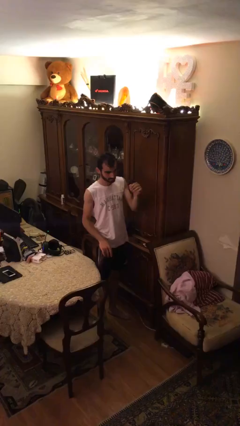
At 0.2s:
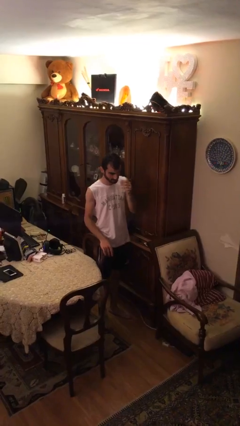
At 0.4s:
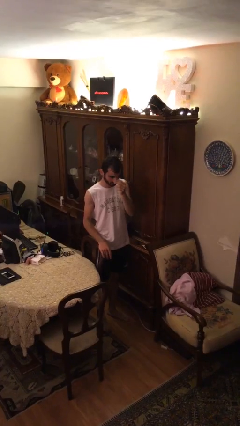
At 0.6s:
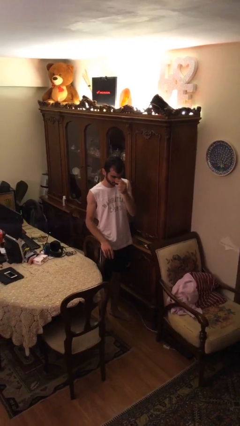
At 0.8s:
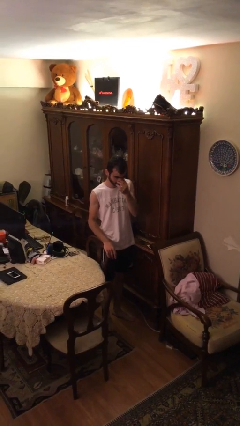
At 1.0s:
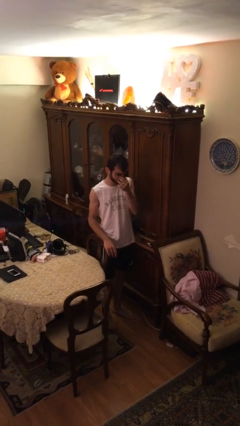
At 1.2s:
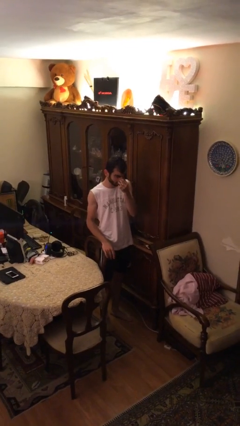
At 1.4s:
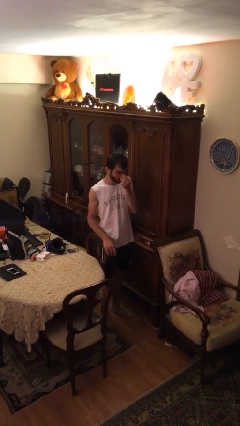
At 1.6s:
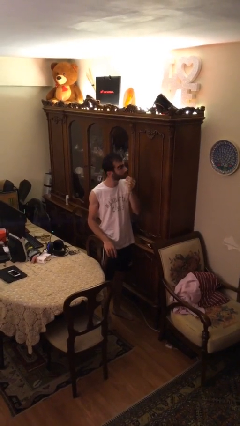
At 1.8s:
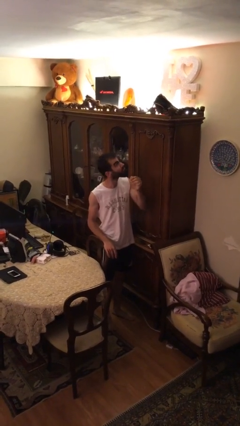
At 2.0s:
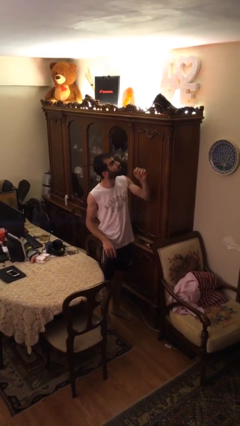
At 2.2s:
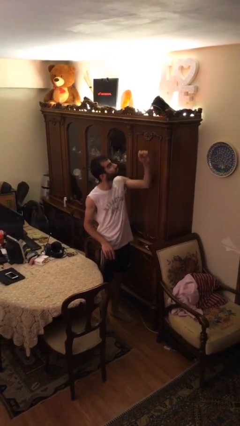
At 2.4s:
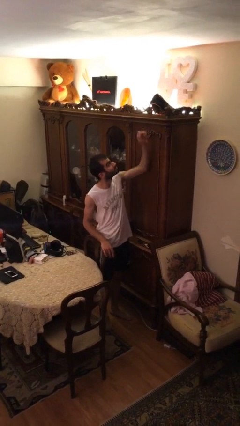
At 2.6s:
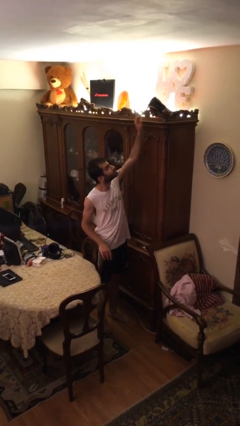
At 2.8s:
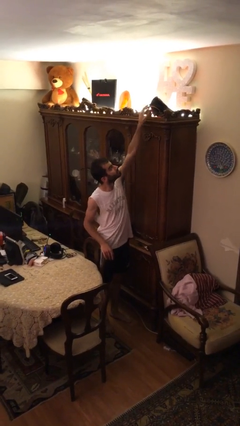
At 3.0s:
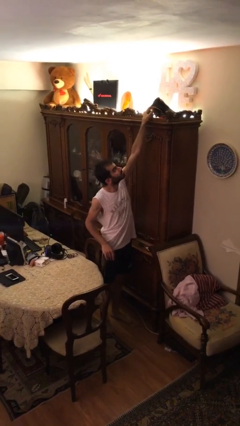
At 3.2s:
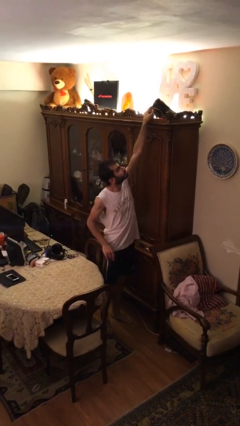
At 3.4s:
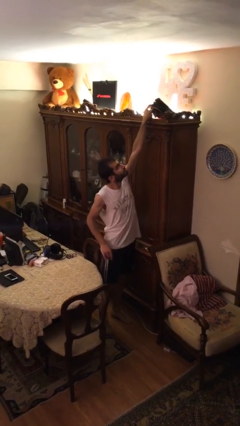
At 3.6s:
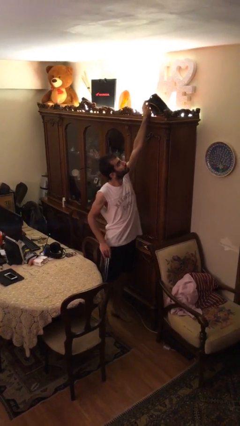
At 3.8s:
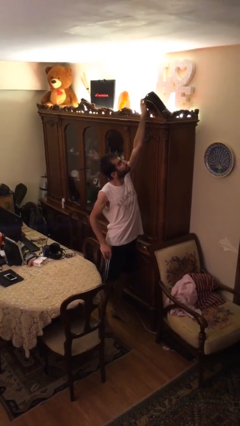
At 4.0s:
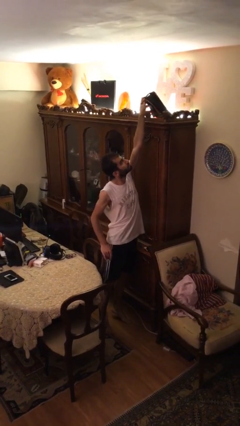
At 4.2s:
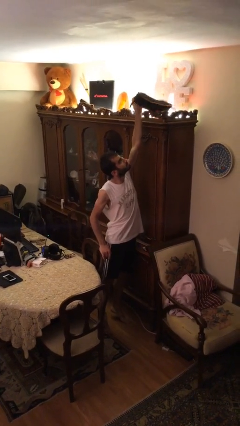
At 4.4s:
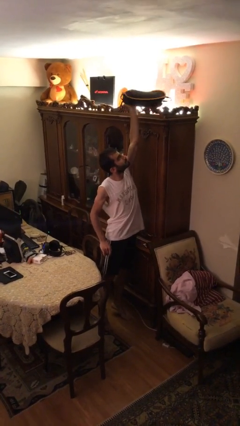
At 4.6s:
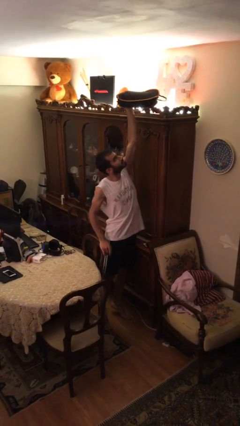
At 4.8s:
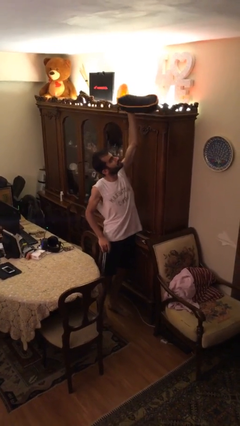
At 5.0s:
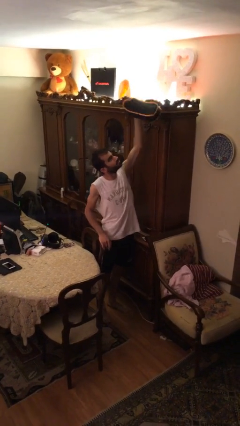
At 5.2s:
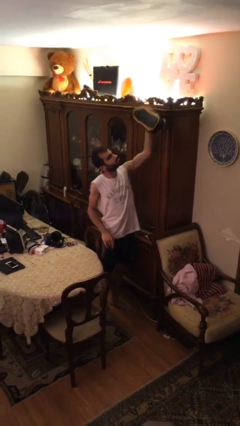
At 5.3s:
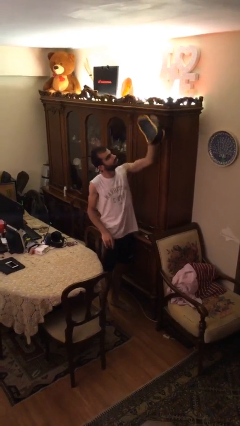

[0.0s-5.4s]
person picks up object from shelf

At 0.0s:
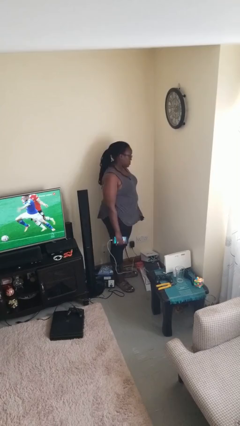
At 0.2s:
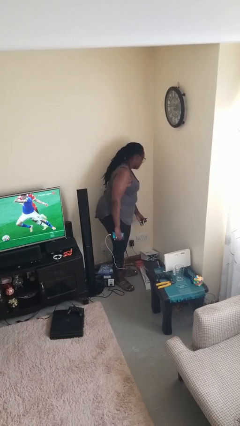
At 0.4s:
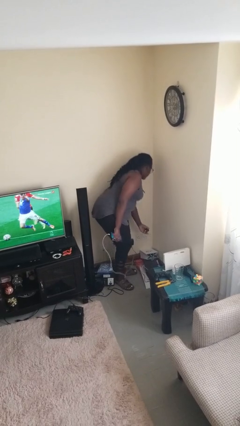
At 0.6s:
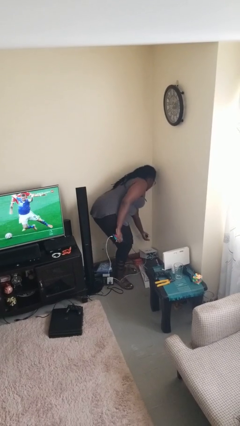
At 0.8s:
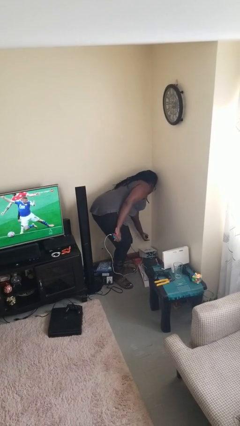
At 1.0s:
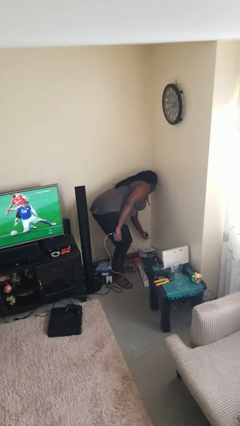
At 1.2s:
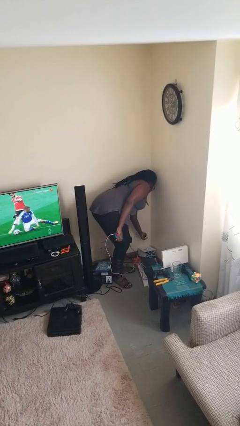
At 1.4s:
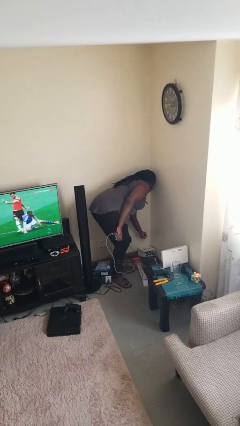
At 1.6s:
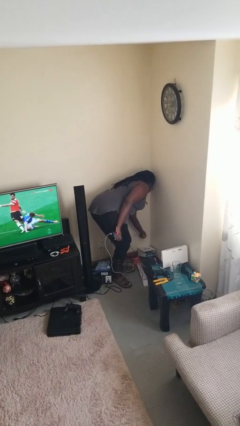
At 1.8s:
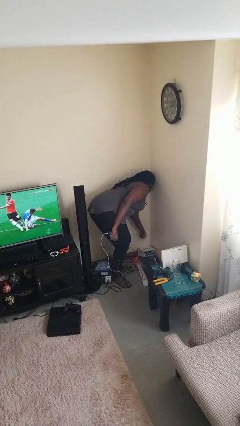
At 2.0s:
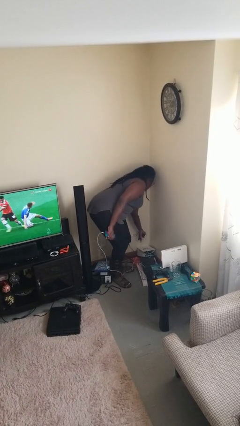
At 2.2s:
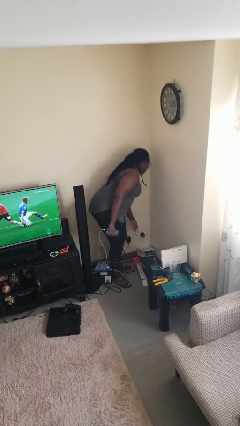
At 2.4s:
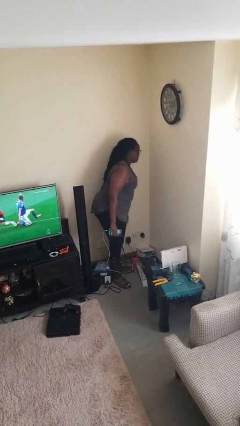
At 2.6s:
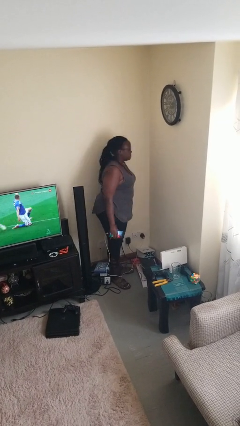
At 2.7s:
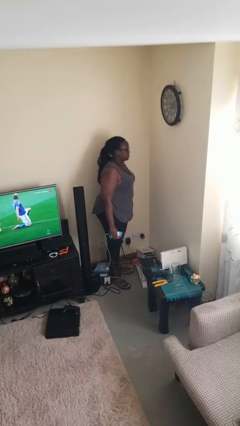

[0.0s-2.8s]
person plugs into electrical socket

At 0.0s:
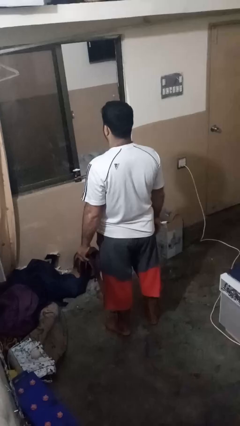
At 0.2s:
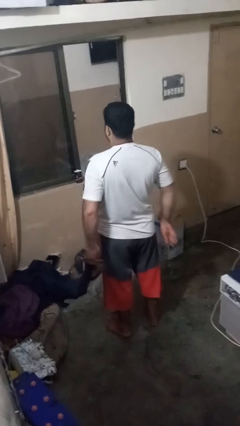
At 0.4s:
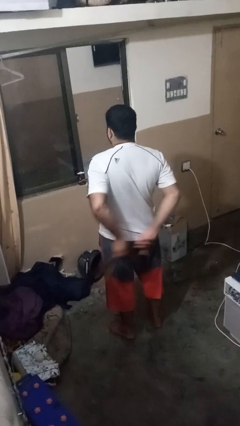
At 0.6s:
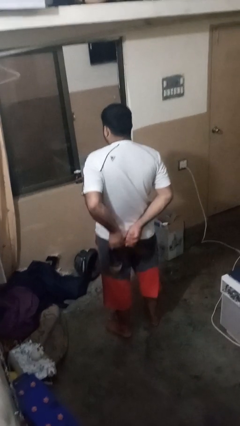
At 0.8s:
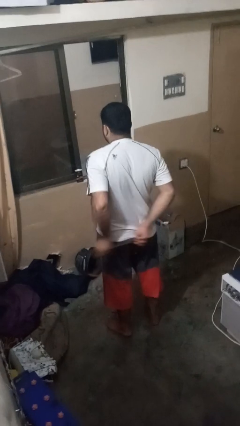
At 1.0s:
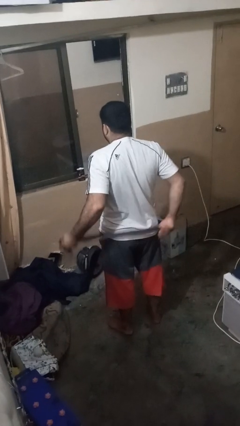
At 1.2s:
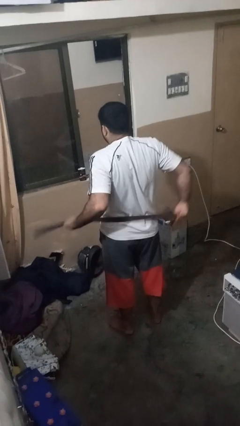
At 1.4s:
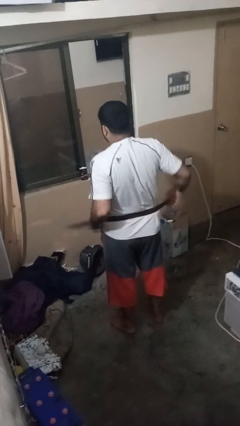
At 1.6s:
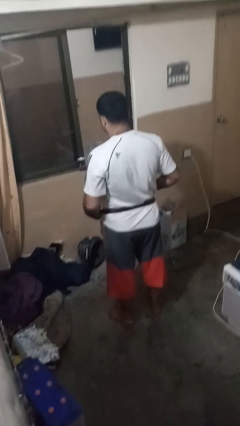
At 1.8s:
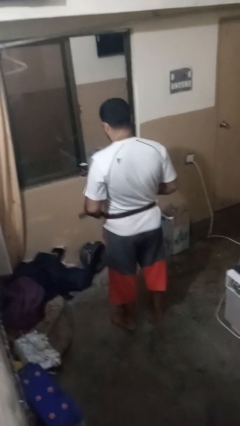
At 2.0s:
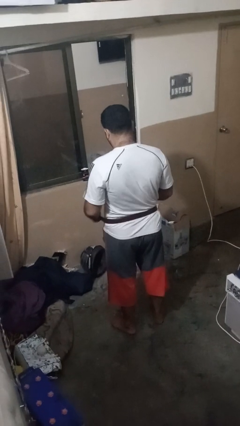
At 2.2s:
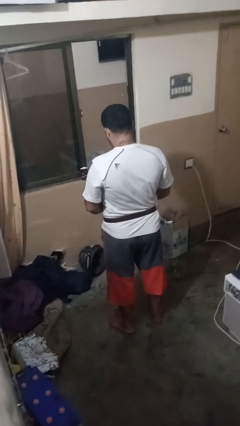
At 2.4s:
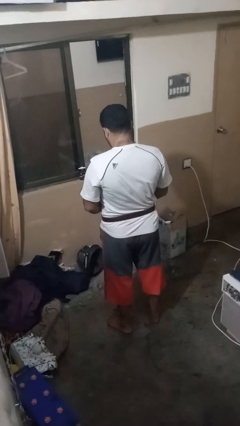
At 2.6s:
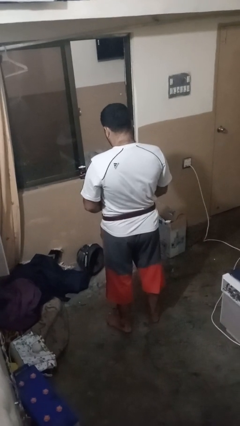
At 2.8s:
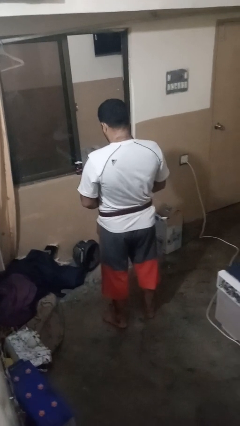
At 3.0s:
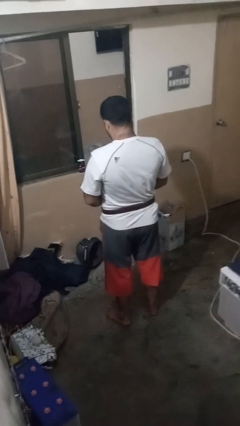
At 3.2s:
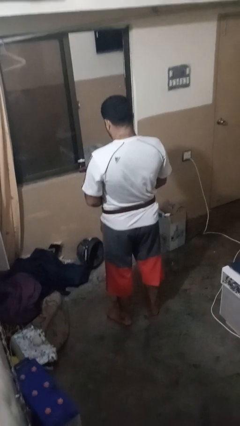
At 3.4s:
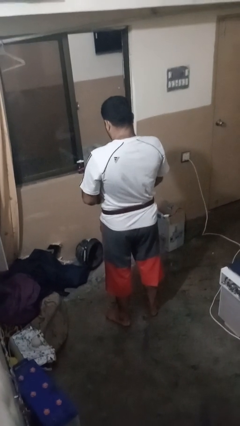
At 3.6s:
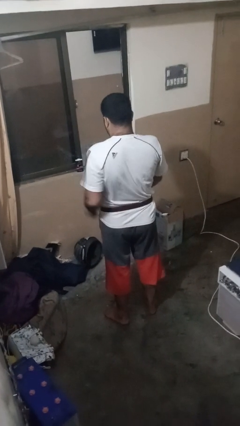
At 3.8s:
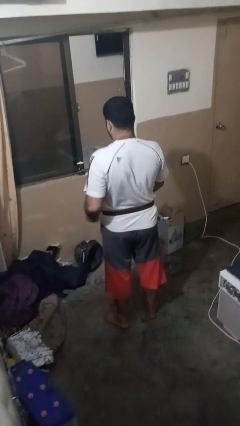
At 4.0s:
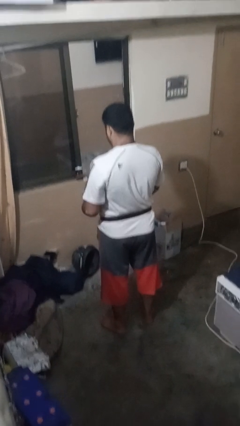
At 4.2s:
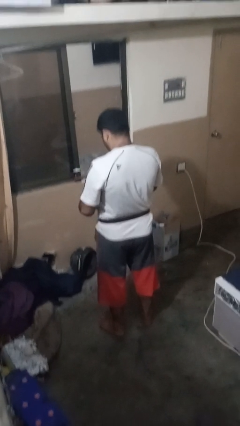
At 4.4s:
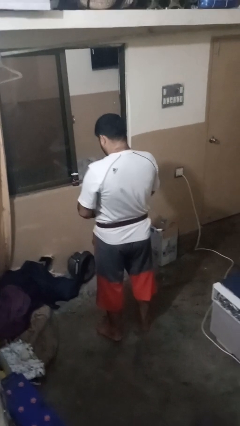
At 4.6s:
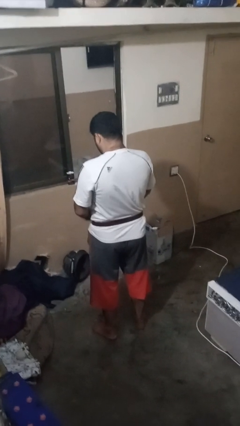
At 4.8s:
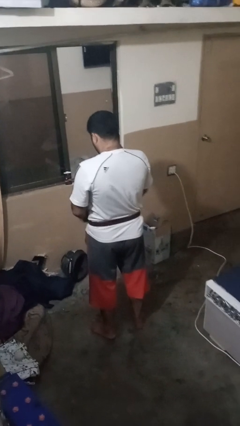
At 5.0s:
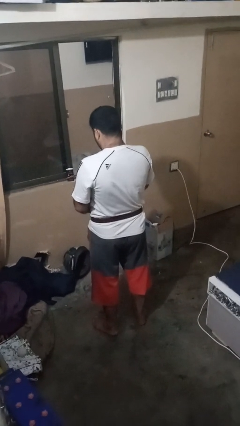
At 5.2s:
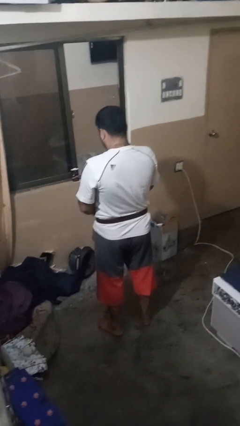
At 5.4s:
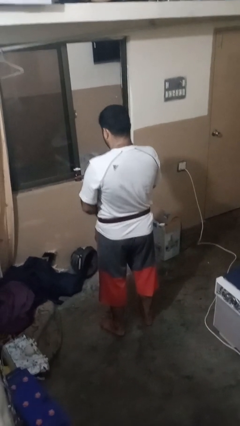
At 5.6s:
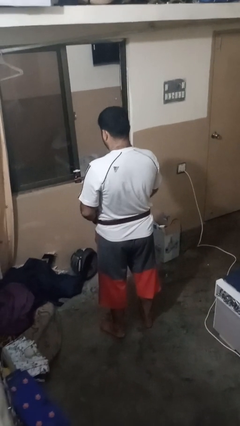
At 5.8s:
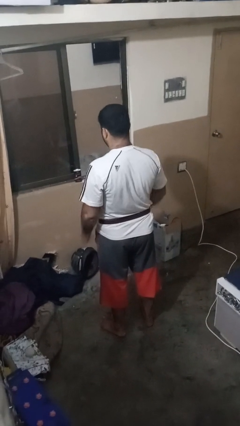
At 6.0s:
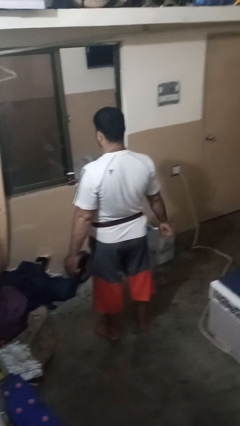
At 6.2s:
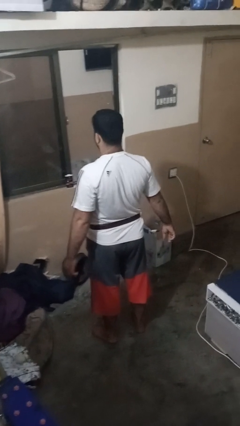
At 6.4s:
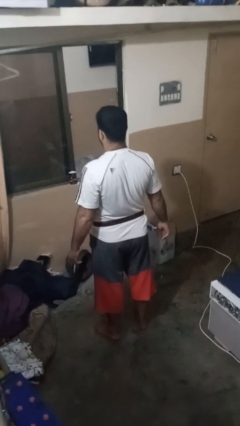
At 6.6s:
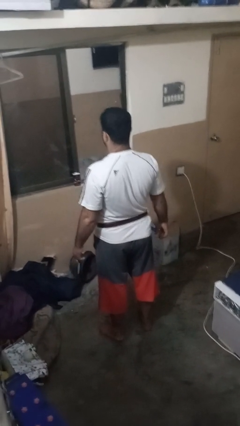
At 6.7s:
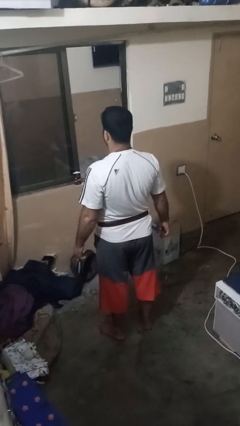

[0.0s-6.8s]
person puts on belt

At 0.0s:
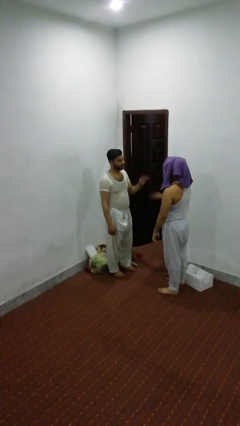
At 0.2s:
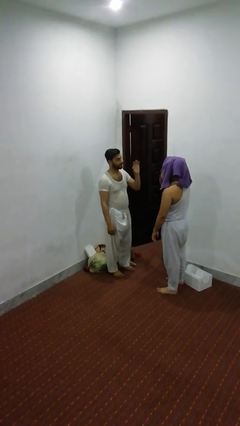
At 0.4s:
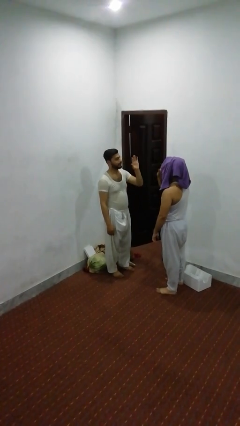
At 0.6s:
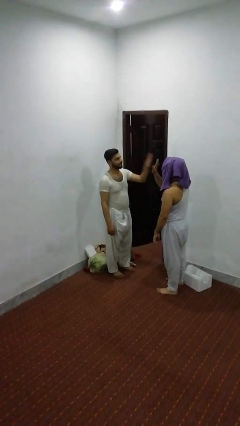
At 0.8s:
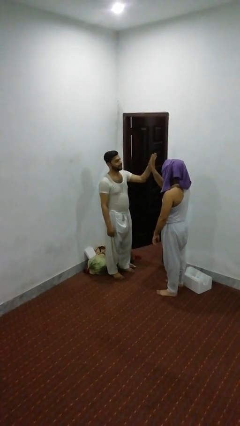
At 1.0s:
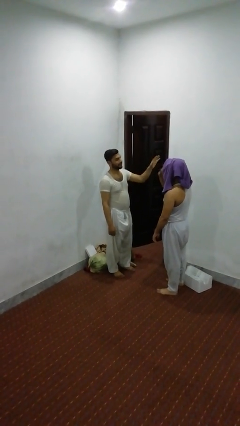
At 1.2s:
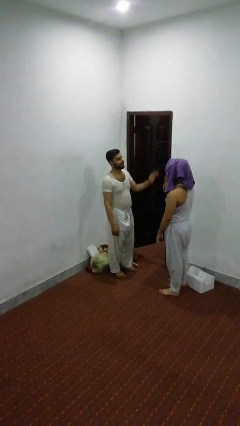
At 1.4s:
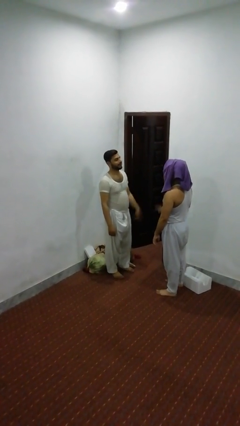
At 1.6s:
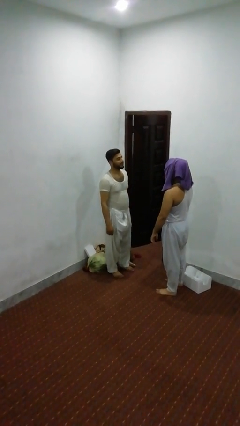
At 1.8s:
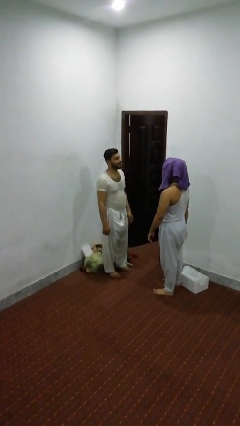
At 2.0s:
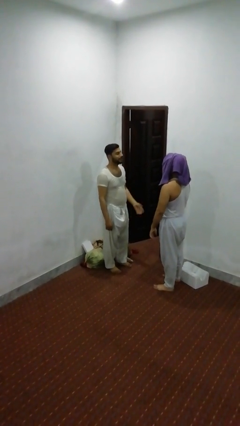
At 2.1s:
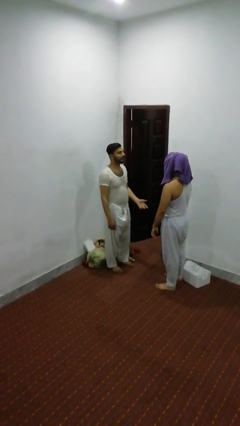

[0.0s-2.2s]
person highfives hand

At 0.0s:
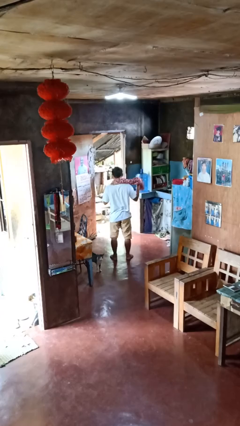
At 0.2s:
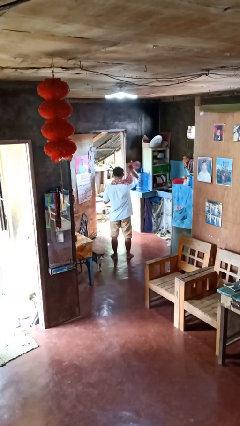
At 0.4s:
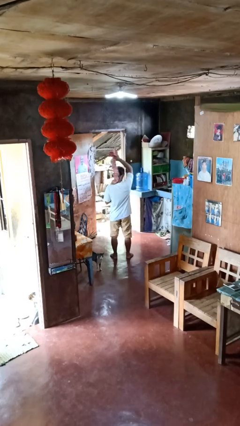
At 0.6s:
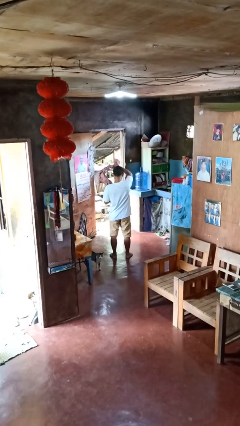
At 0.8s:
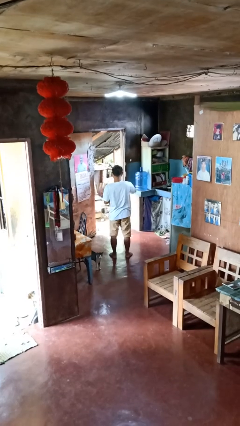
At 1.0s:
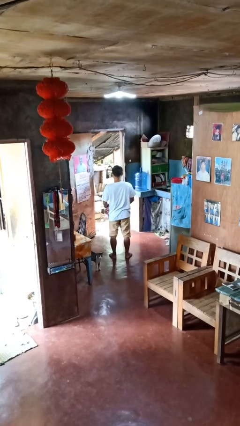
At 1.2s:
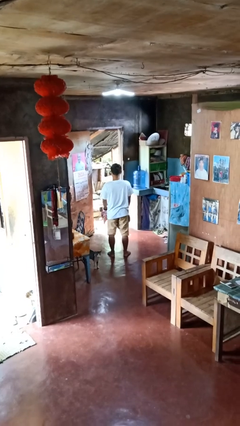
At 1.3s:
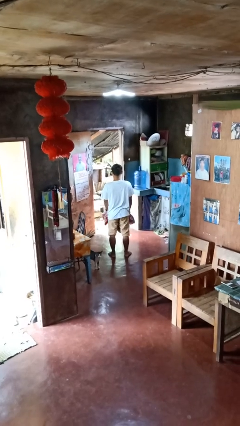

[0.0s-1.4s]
person takes off scarf
